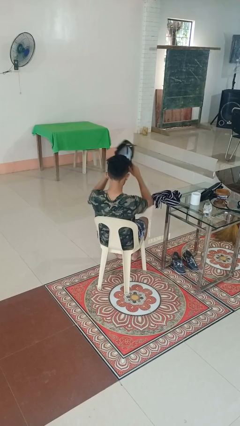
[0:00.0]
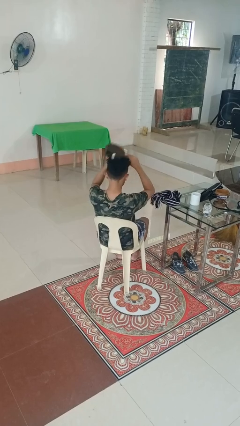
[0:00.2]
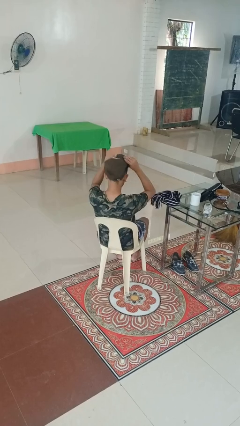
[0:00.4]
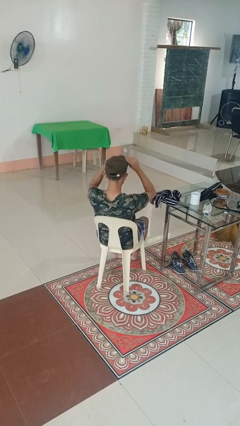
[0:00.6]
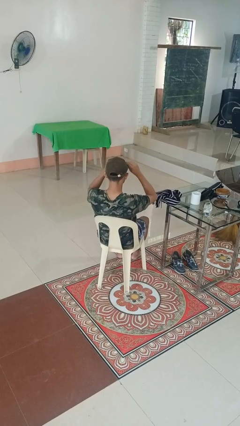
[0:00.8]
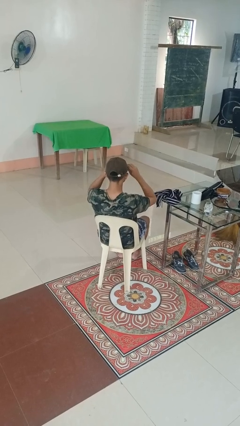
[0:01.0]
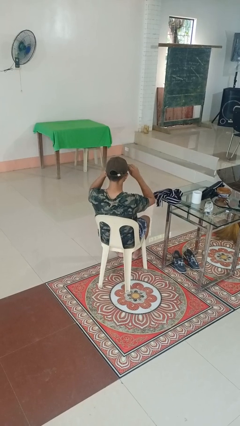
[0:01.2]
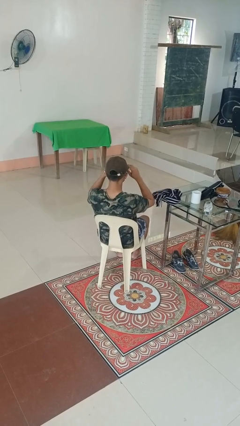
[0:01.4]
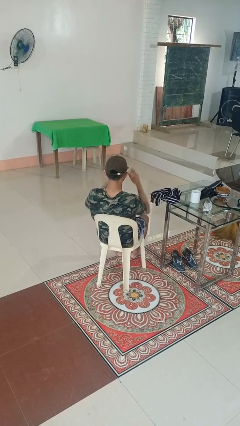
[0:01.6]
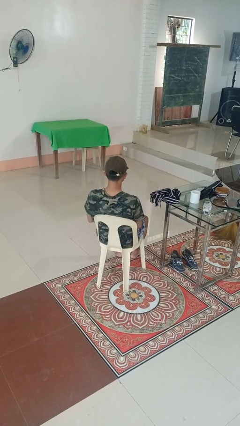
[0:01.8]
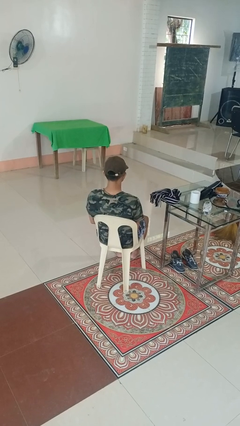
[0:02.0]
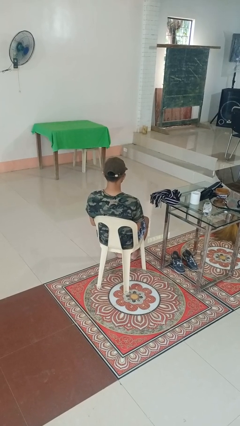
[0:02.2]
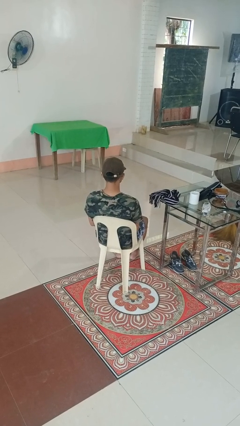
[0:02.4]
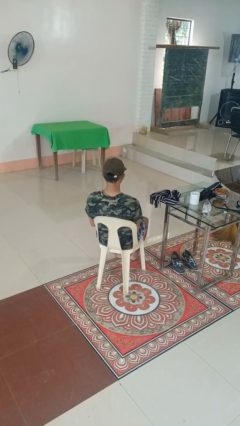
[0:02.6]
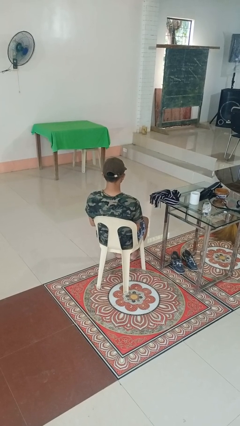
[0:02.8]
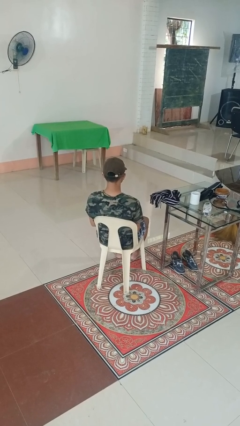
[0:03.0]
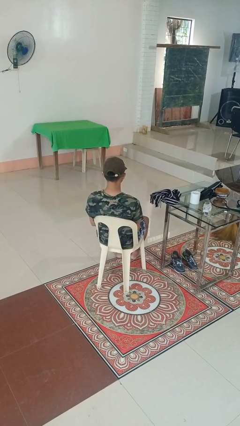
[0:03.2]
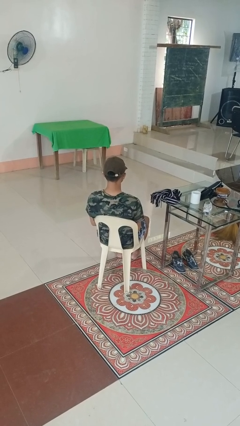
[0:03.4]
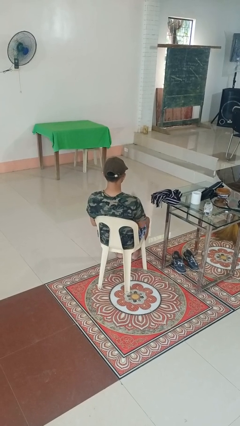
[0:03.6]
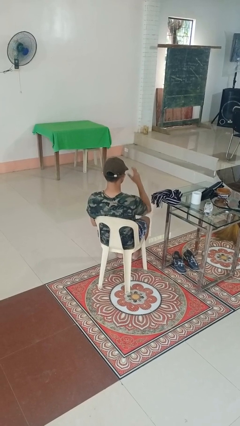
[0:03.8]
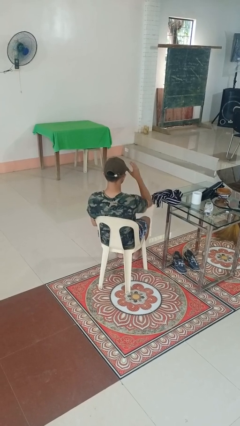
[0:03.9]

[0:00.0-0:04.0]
person puts on hat

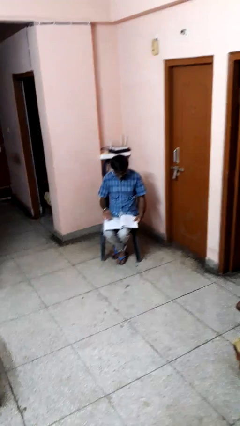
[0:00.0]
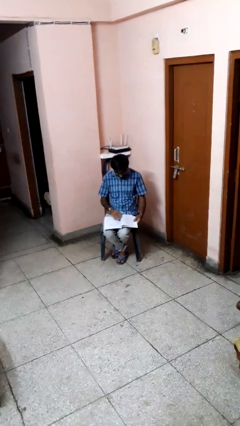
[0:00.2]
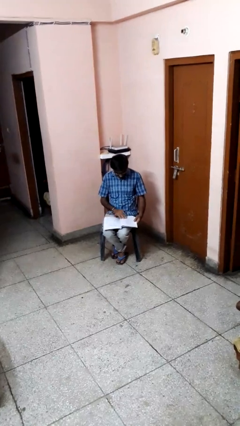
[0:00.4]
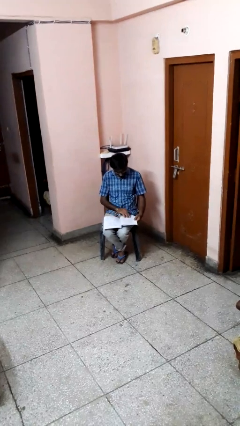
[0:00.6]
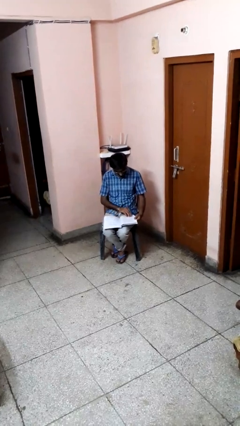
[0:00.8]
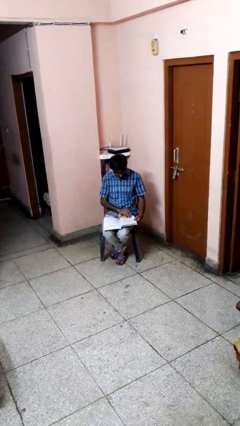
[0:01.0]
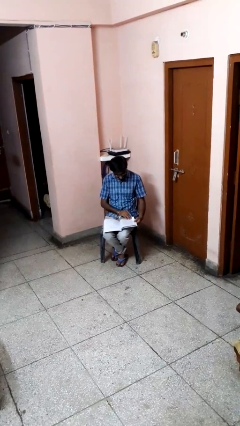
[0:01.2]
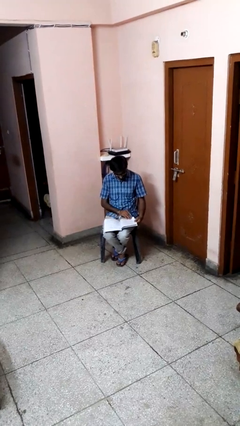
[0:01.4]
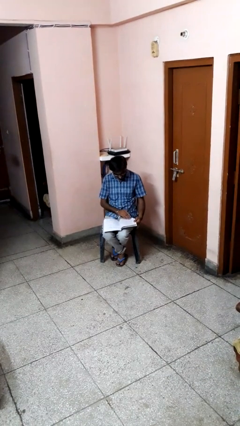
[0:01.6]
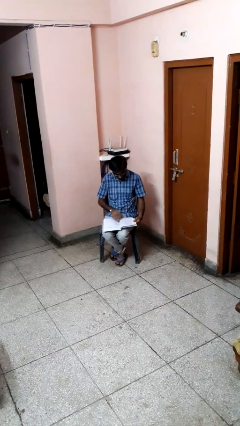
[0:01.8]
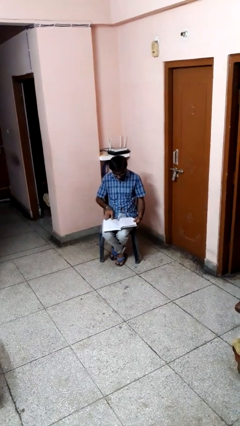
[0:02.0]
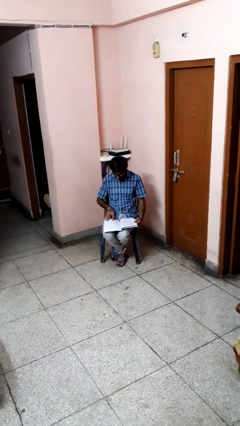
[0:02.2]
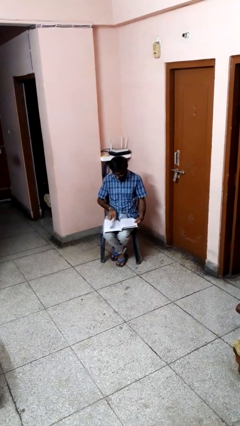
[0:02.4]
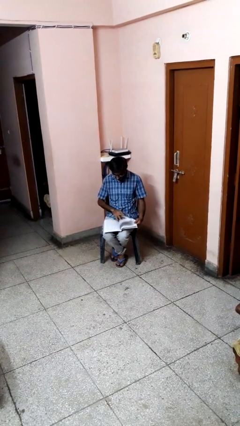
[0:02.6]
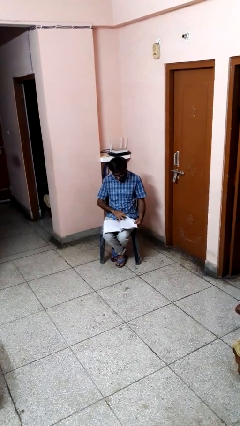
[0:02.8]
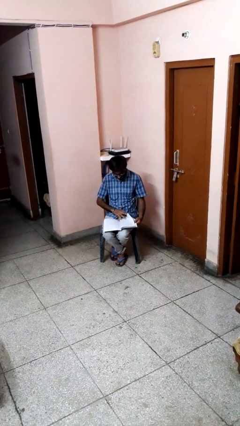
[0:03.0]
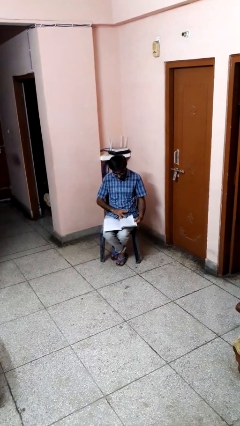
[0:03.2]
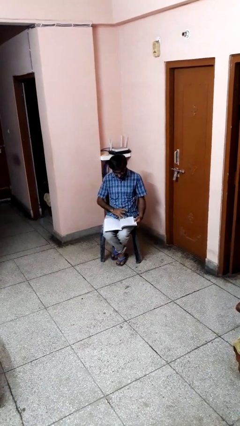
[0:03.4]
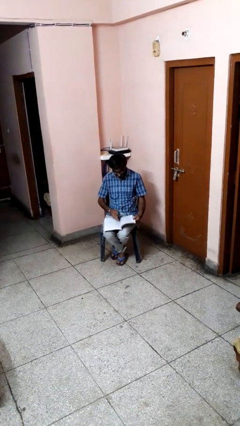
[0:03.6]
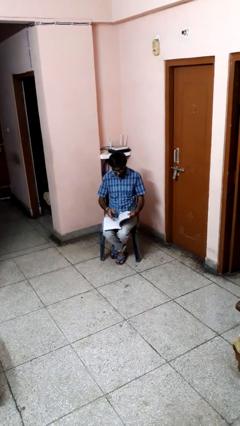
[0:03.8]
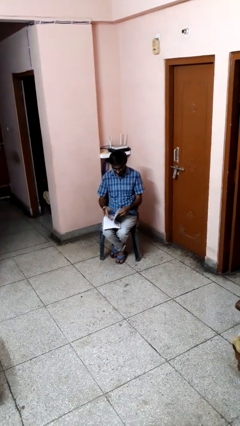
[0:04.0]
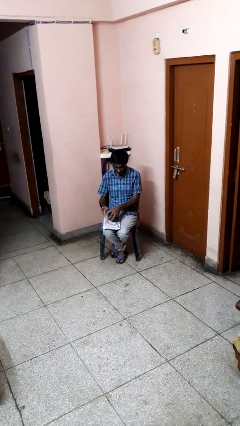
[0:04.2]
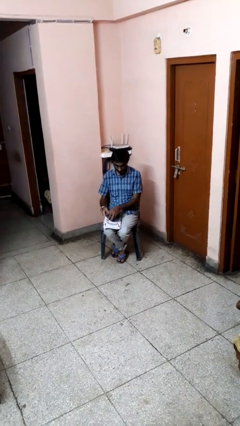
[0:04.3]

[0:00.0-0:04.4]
person reads book

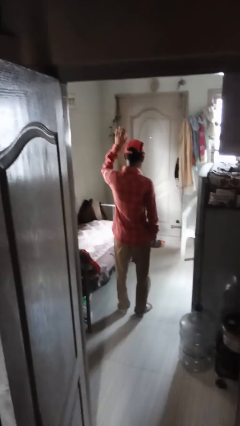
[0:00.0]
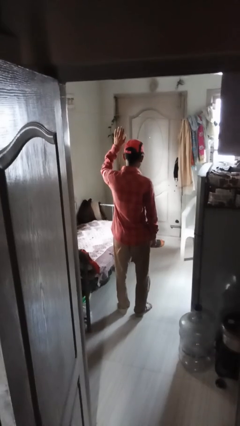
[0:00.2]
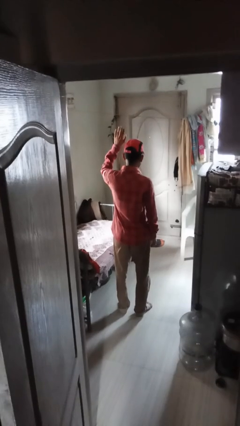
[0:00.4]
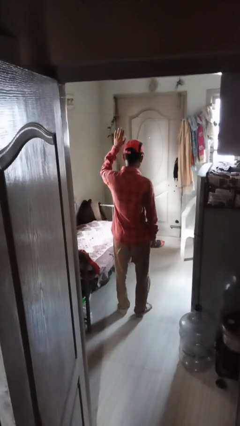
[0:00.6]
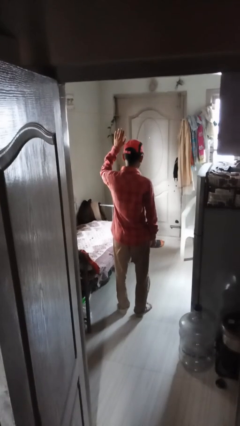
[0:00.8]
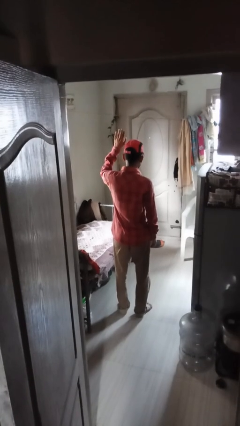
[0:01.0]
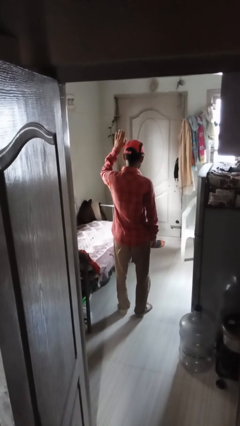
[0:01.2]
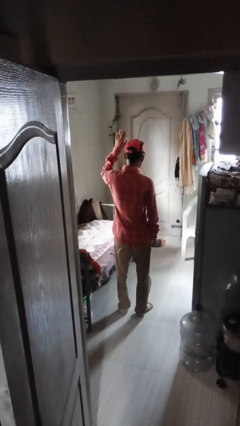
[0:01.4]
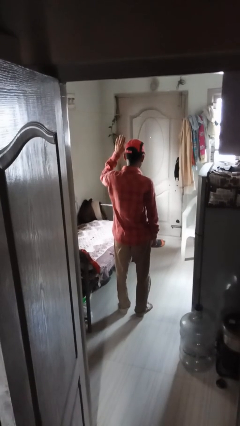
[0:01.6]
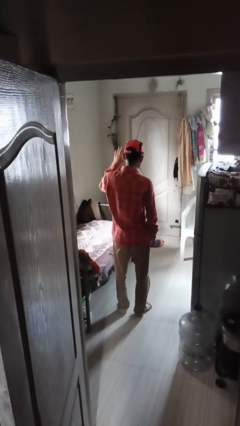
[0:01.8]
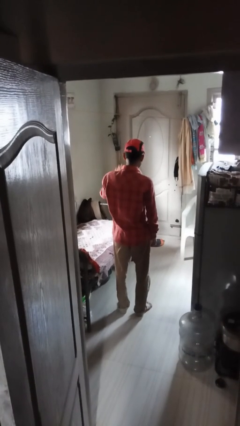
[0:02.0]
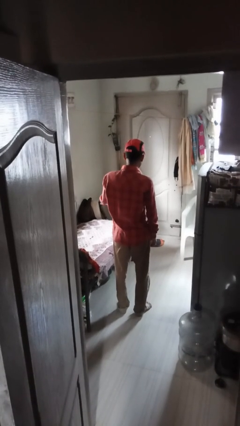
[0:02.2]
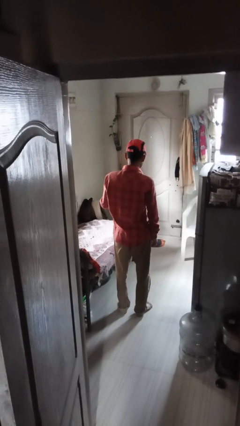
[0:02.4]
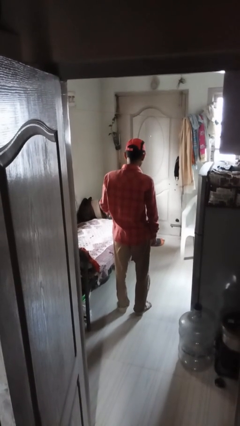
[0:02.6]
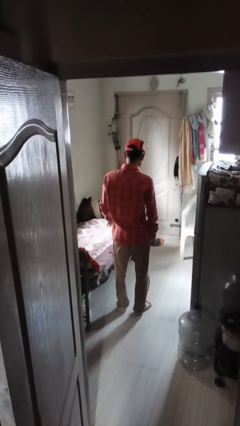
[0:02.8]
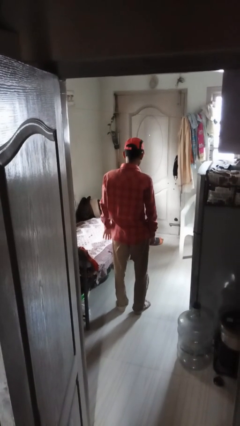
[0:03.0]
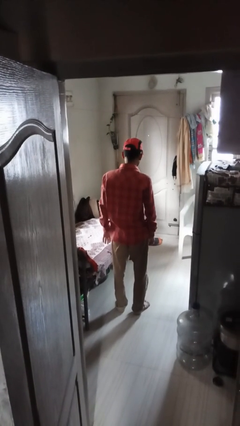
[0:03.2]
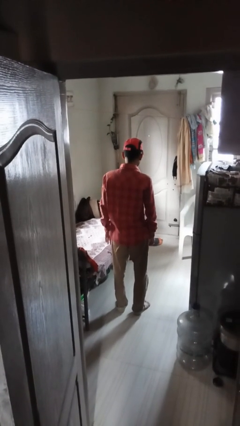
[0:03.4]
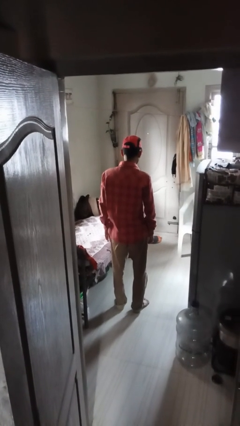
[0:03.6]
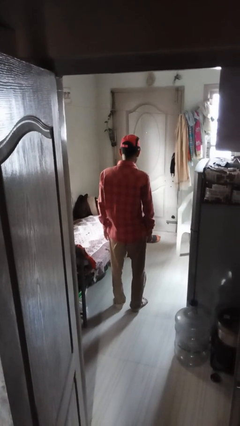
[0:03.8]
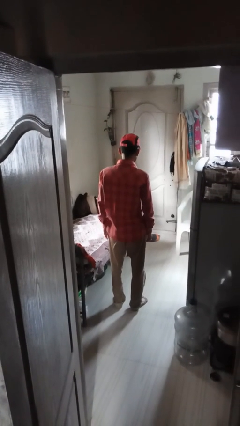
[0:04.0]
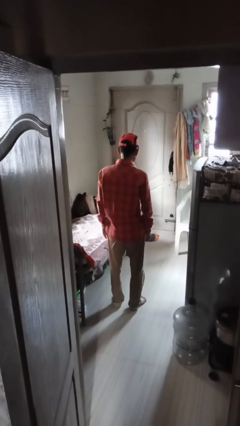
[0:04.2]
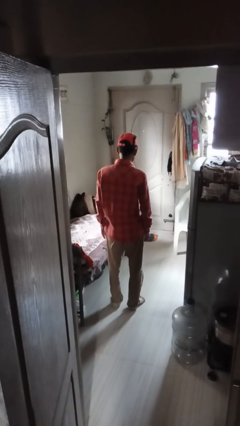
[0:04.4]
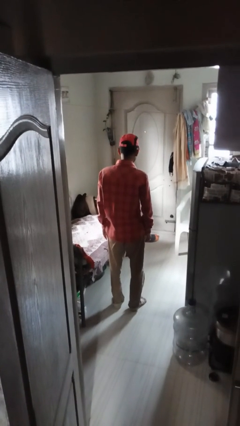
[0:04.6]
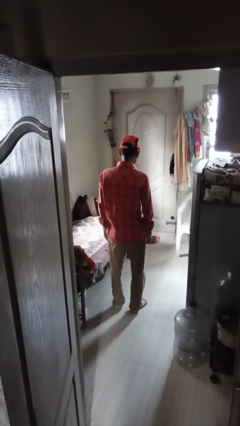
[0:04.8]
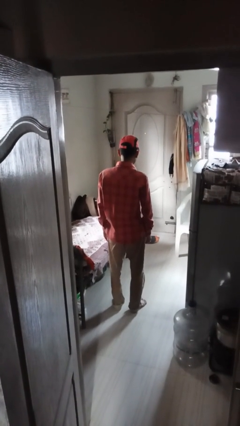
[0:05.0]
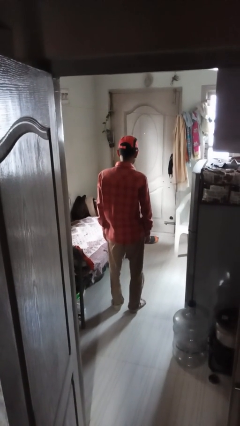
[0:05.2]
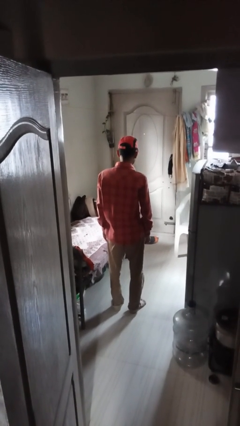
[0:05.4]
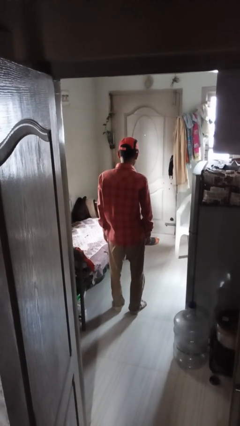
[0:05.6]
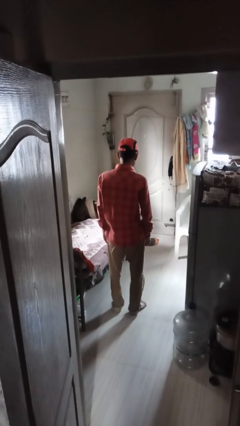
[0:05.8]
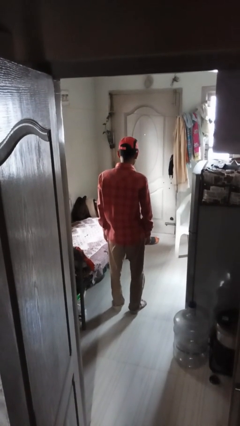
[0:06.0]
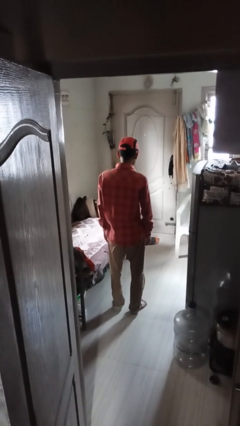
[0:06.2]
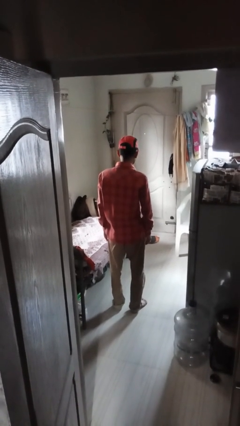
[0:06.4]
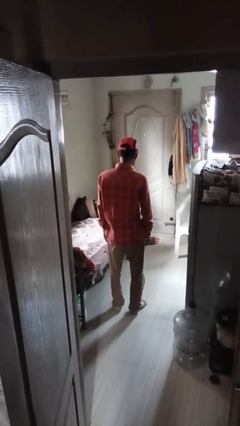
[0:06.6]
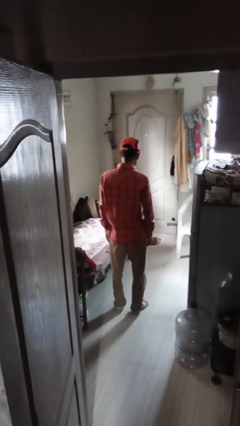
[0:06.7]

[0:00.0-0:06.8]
person gestures lower hand

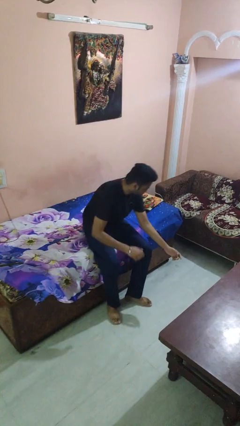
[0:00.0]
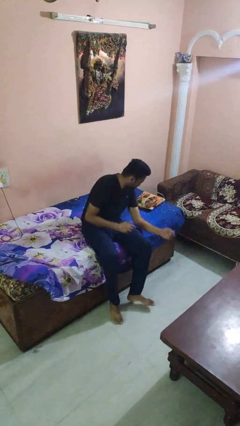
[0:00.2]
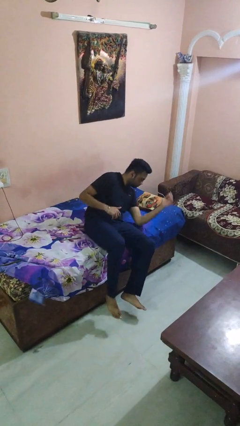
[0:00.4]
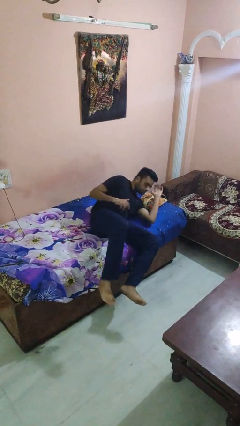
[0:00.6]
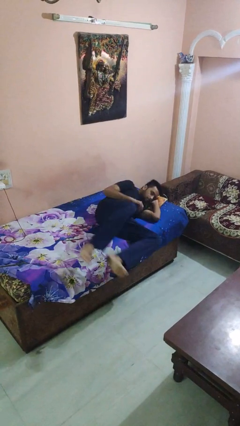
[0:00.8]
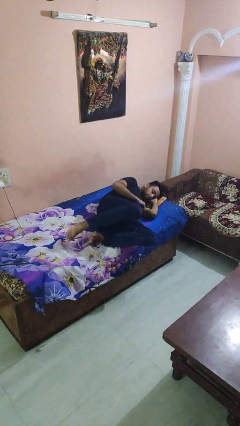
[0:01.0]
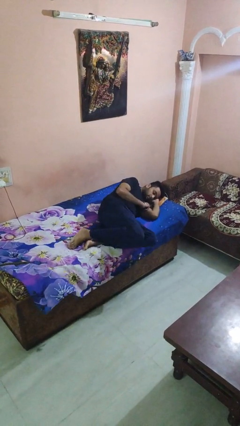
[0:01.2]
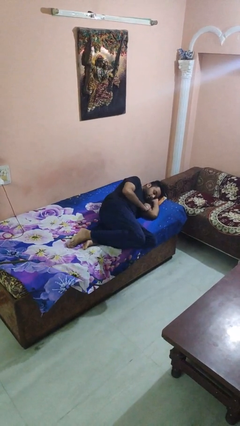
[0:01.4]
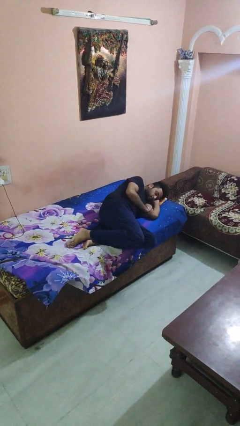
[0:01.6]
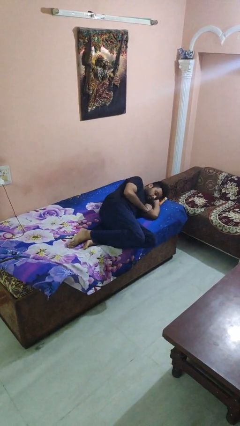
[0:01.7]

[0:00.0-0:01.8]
person lies down on bed

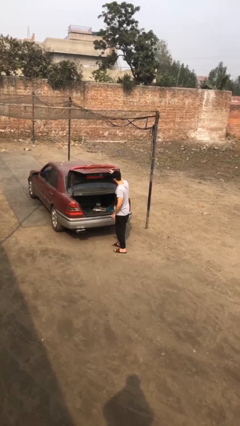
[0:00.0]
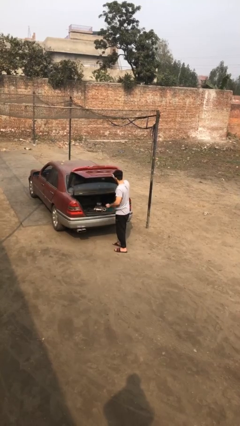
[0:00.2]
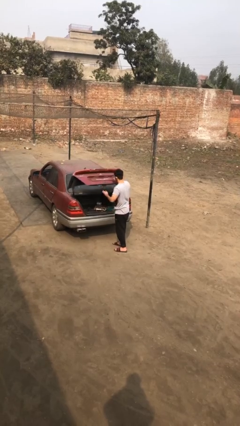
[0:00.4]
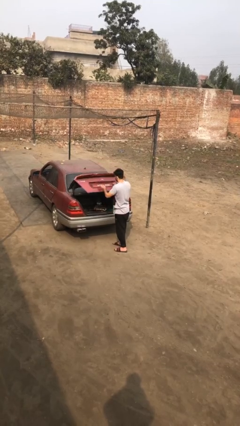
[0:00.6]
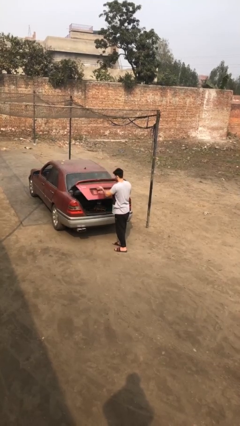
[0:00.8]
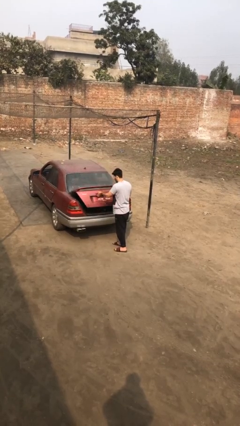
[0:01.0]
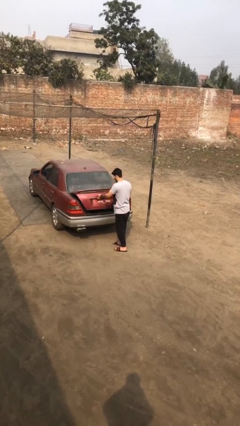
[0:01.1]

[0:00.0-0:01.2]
person closes car trunk
